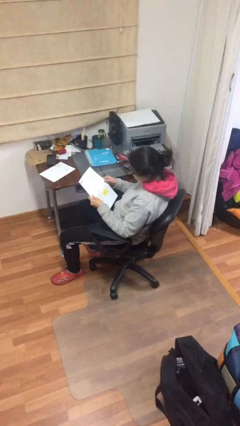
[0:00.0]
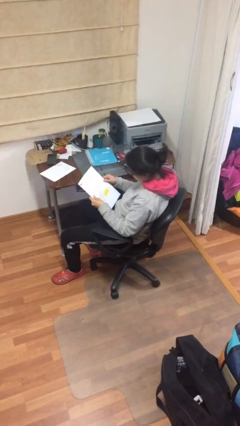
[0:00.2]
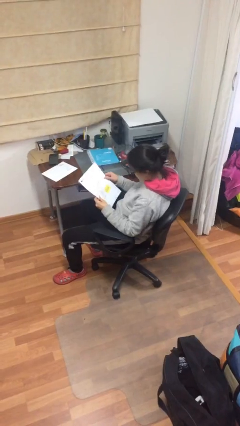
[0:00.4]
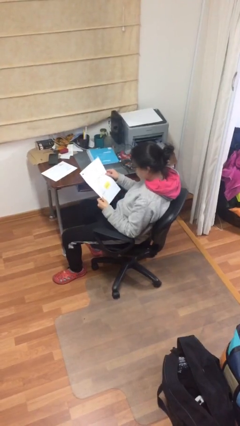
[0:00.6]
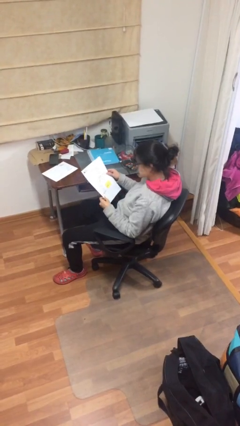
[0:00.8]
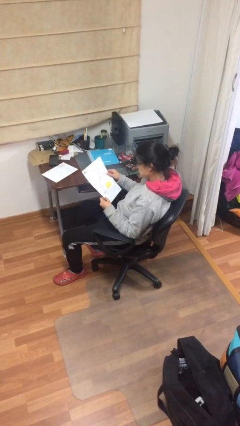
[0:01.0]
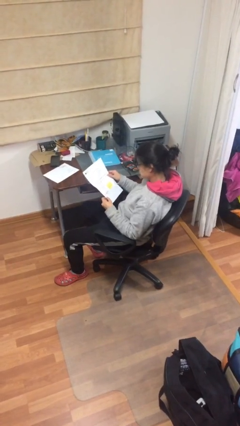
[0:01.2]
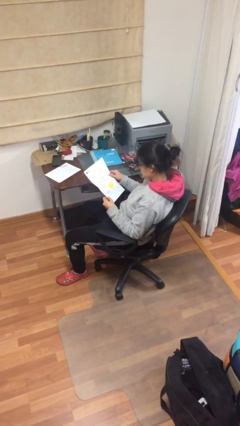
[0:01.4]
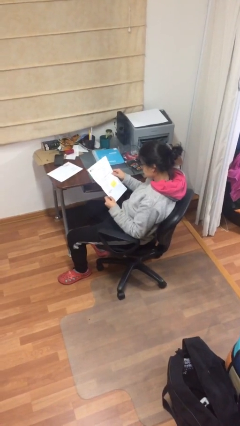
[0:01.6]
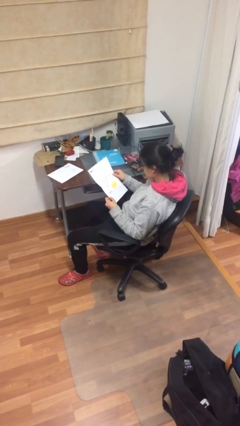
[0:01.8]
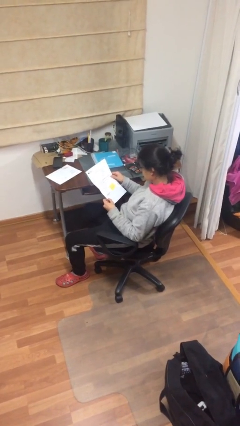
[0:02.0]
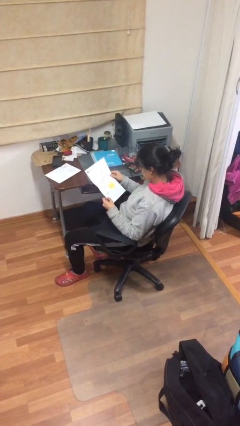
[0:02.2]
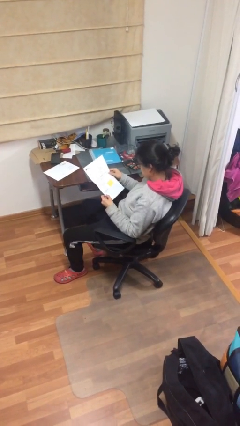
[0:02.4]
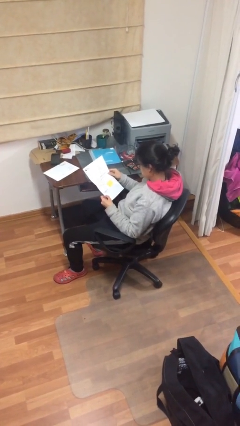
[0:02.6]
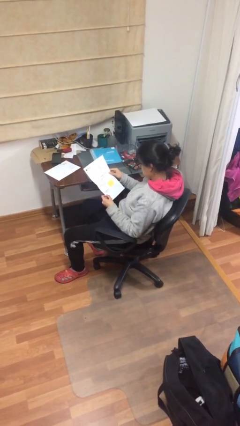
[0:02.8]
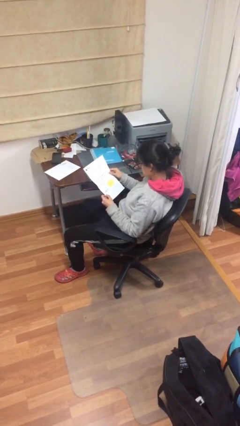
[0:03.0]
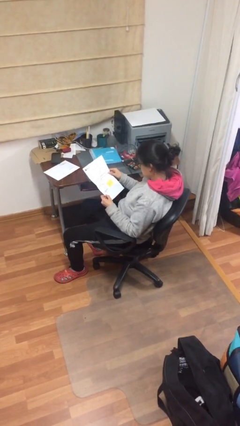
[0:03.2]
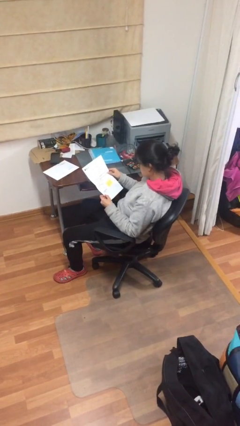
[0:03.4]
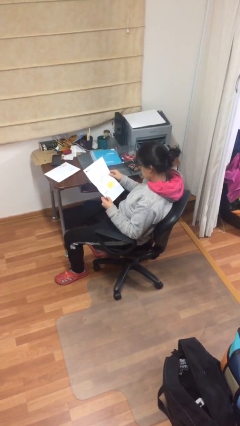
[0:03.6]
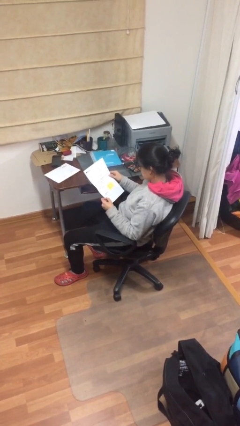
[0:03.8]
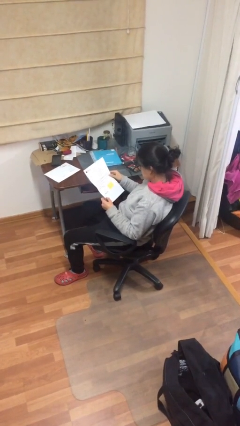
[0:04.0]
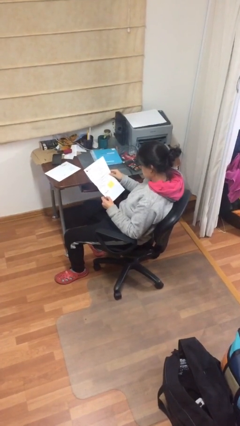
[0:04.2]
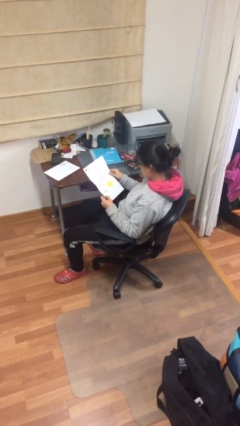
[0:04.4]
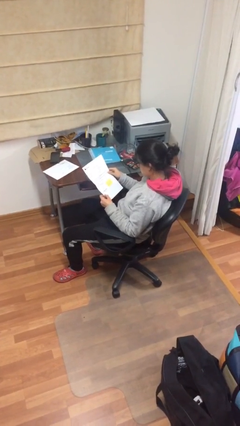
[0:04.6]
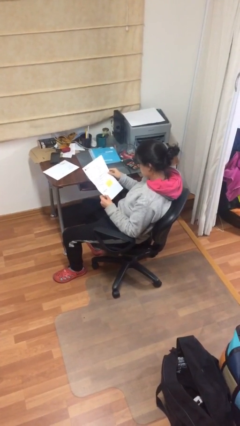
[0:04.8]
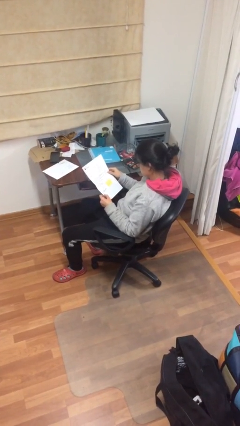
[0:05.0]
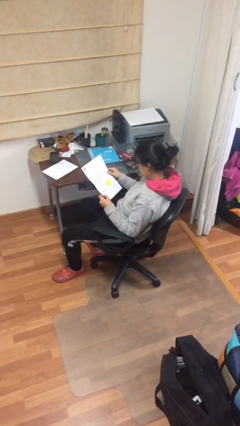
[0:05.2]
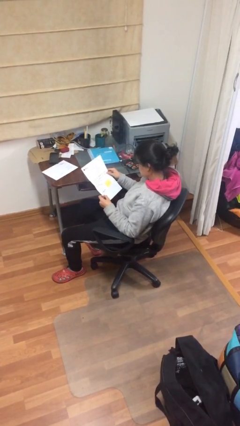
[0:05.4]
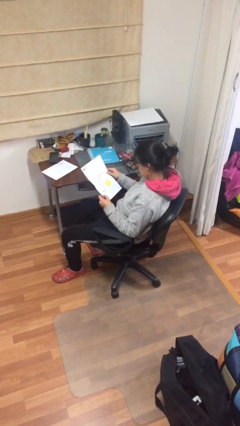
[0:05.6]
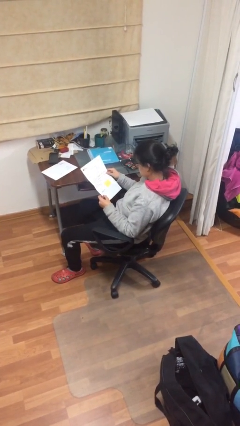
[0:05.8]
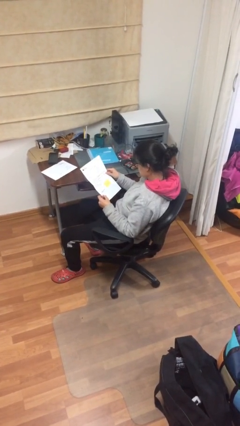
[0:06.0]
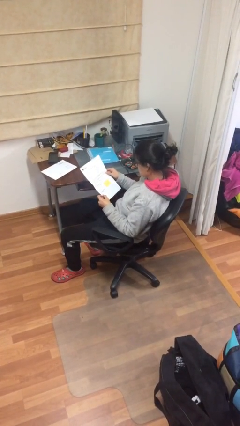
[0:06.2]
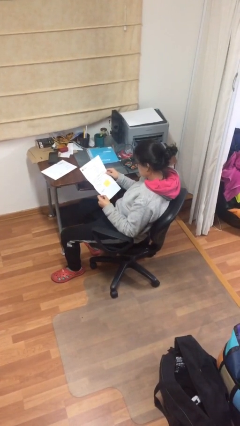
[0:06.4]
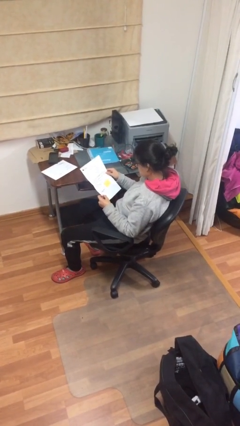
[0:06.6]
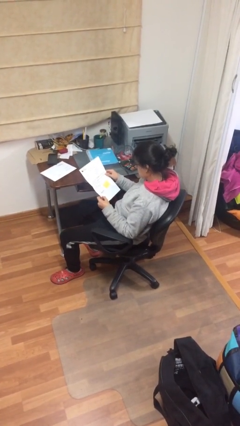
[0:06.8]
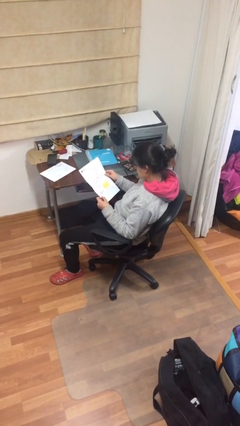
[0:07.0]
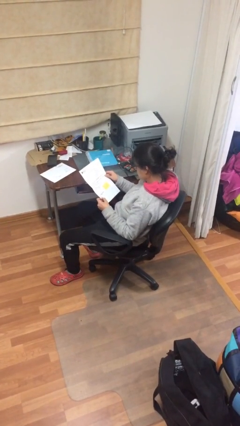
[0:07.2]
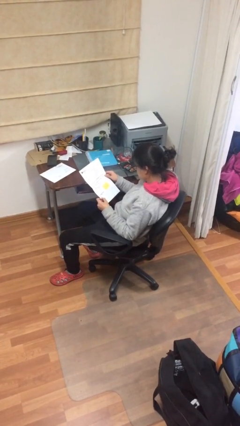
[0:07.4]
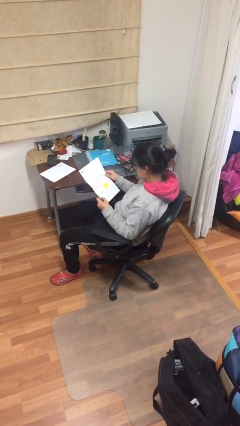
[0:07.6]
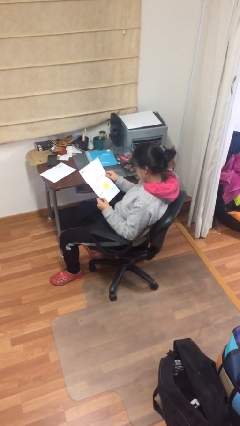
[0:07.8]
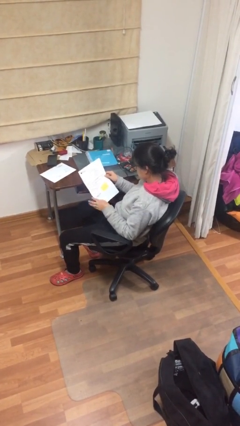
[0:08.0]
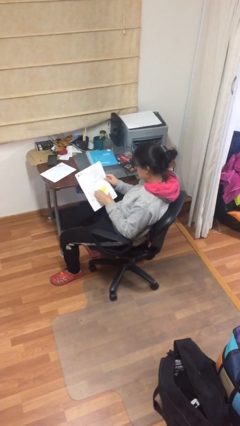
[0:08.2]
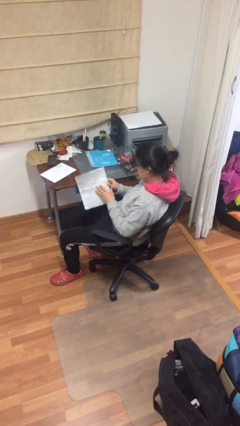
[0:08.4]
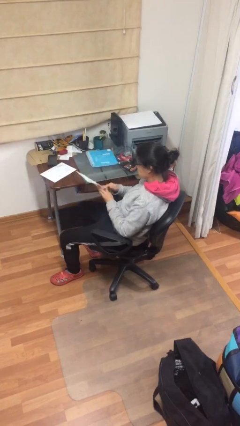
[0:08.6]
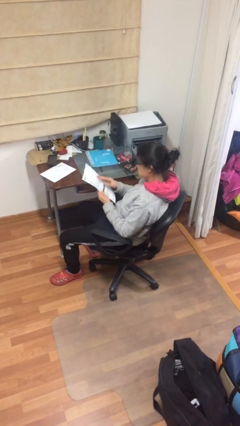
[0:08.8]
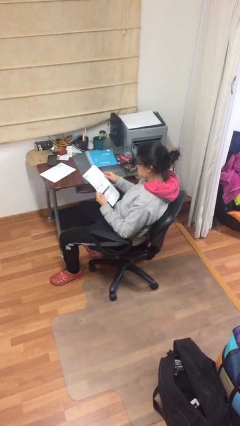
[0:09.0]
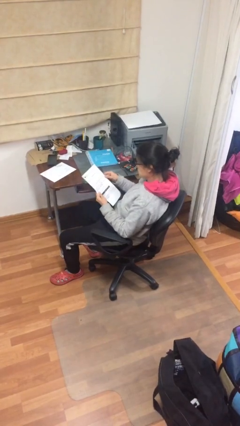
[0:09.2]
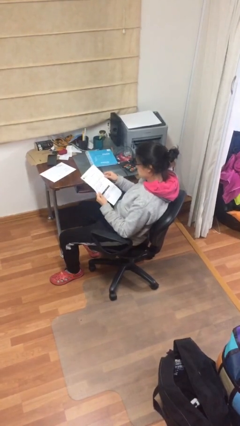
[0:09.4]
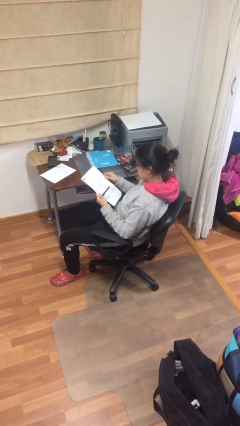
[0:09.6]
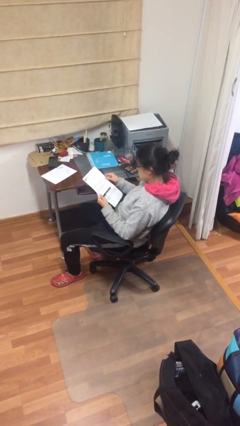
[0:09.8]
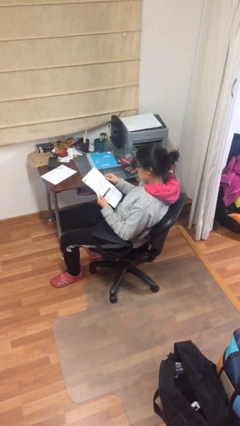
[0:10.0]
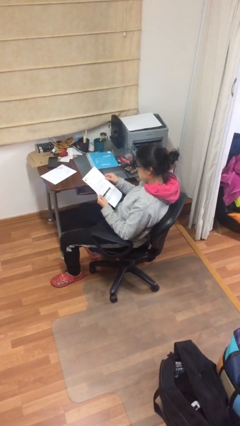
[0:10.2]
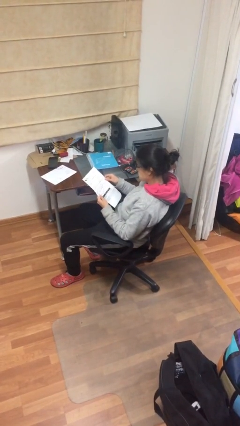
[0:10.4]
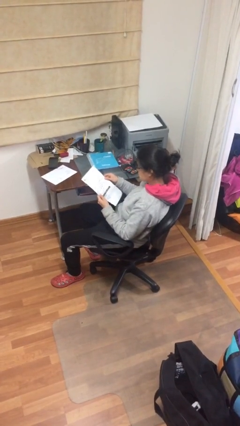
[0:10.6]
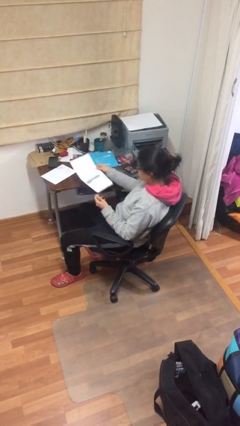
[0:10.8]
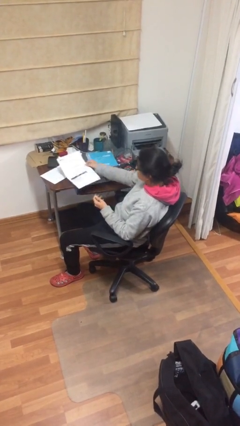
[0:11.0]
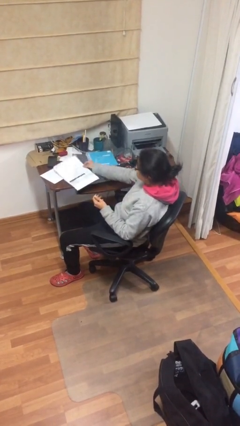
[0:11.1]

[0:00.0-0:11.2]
person reads document

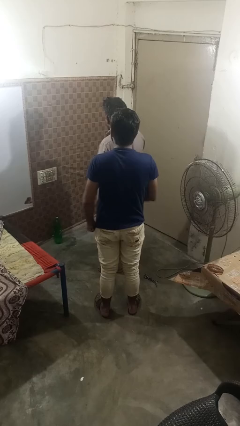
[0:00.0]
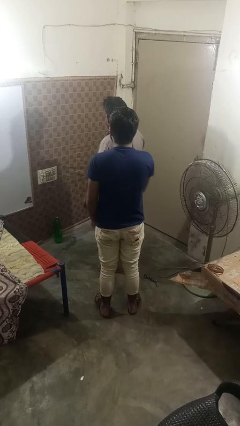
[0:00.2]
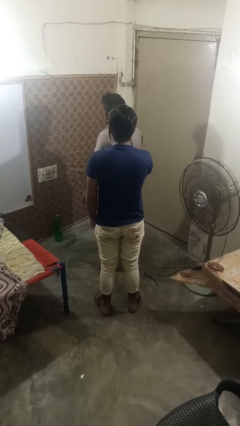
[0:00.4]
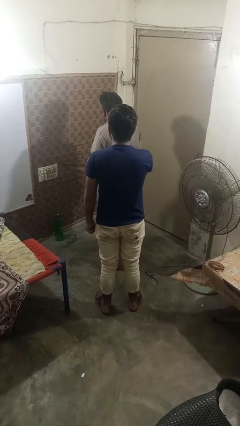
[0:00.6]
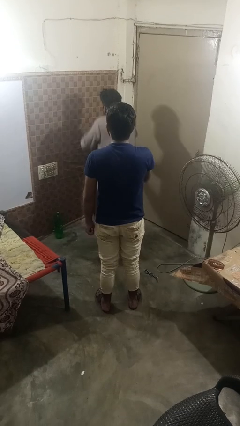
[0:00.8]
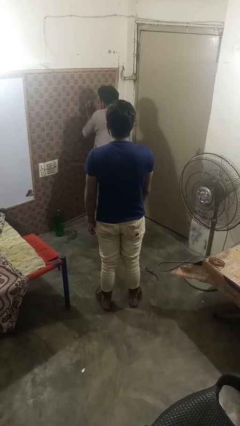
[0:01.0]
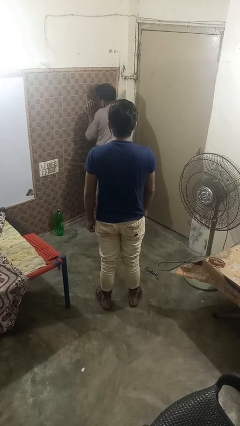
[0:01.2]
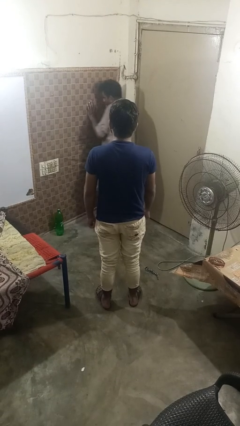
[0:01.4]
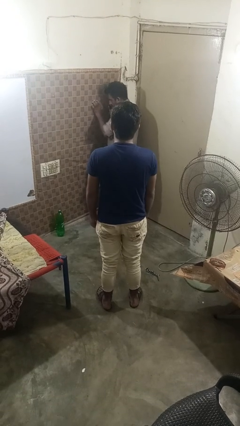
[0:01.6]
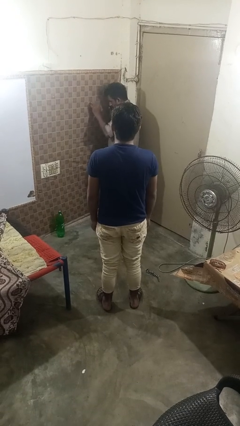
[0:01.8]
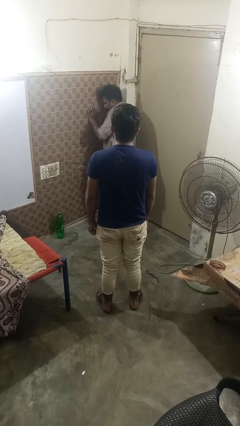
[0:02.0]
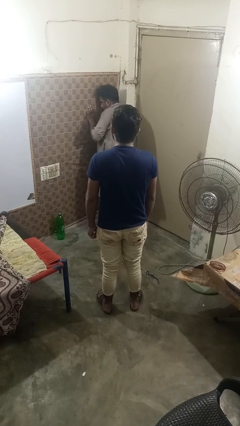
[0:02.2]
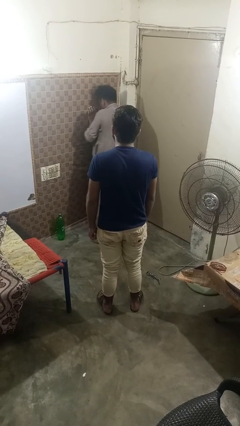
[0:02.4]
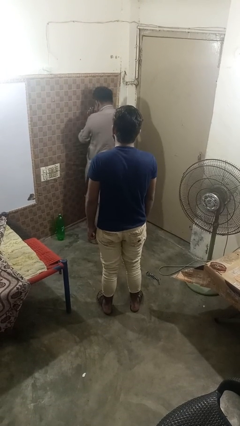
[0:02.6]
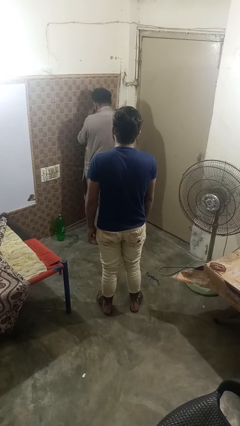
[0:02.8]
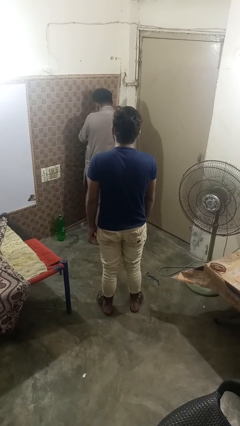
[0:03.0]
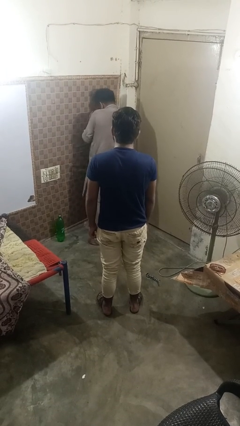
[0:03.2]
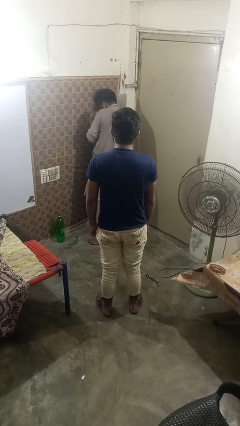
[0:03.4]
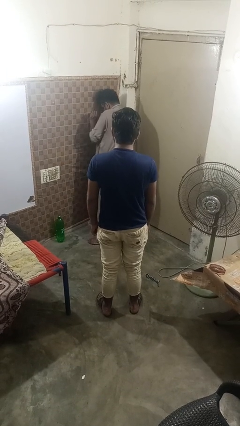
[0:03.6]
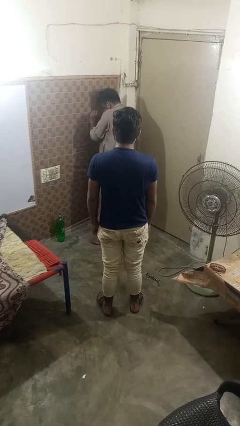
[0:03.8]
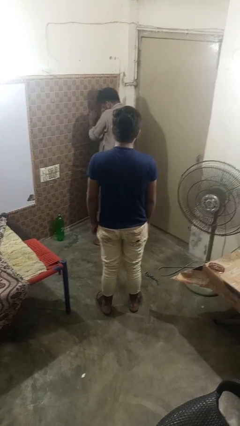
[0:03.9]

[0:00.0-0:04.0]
person shoves person

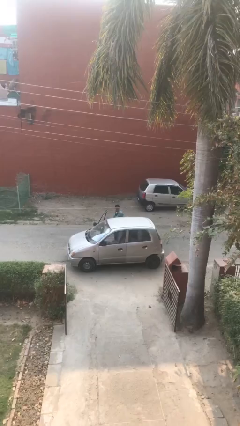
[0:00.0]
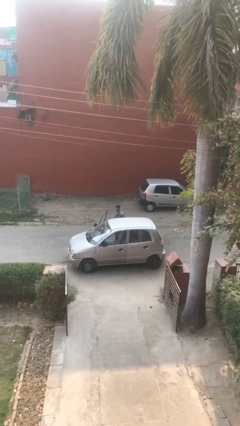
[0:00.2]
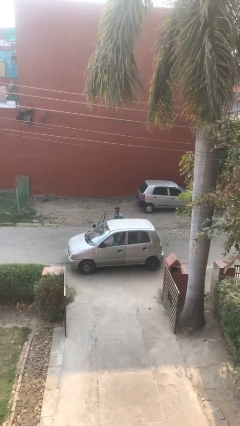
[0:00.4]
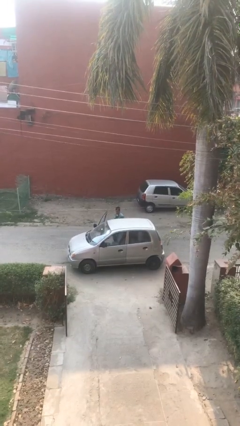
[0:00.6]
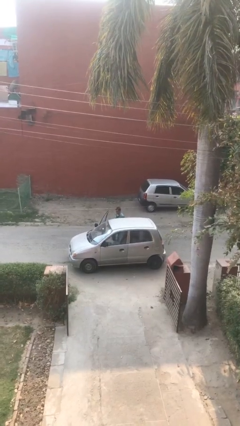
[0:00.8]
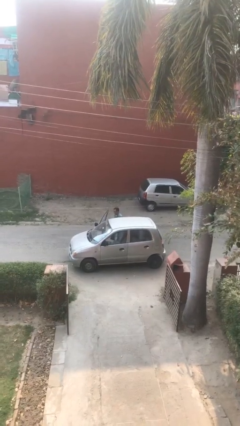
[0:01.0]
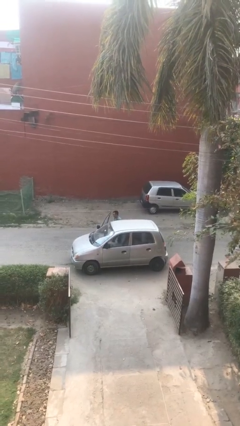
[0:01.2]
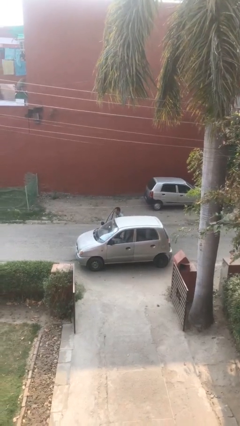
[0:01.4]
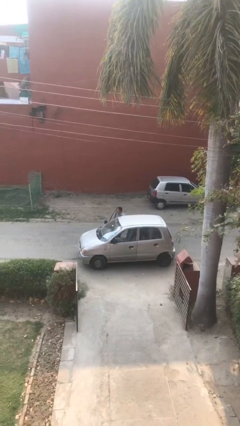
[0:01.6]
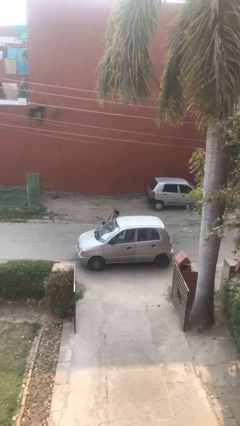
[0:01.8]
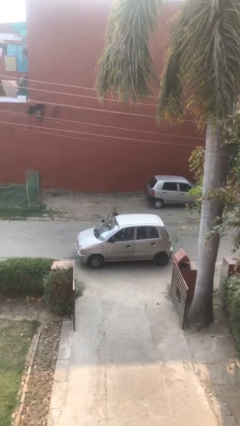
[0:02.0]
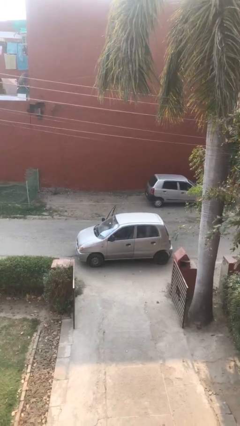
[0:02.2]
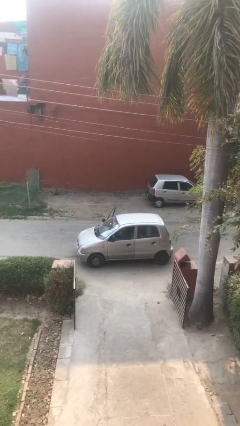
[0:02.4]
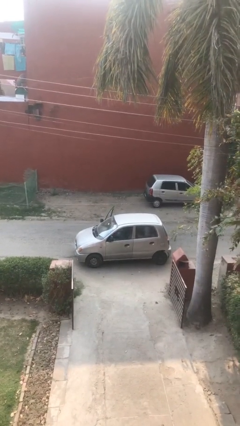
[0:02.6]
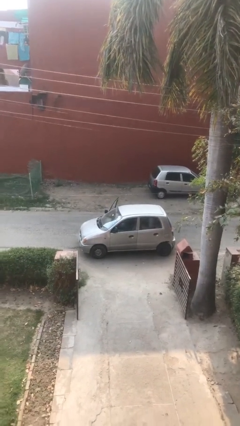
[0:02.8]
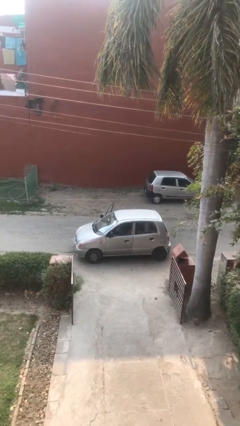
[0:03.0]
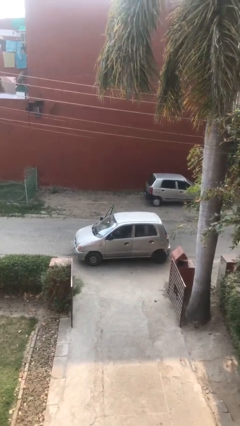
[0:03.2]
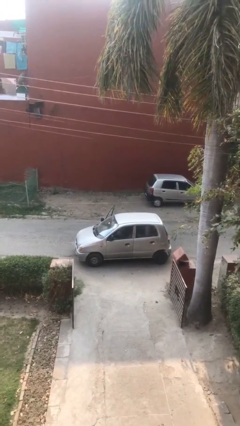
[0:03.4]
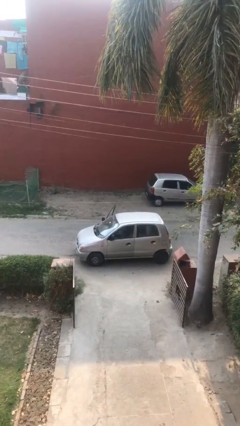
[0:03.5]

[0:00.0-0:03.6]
person enters car
